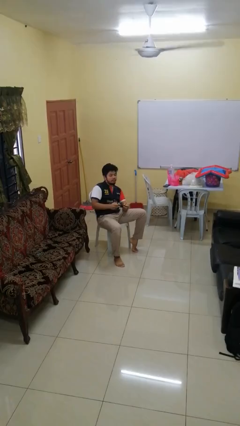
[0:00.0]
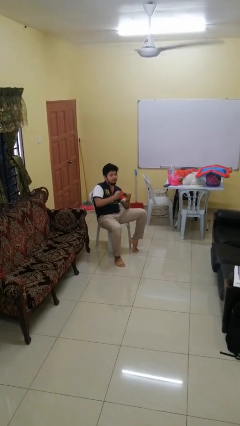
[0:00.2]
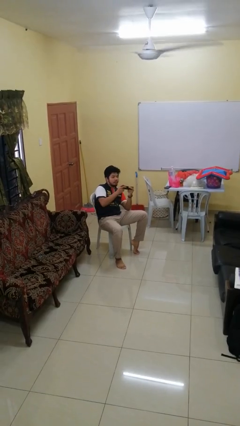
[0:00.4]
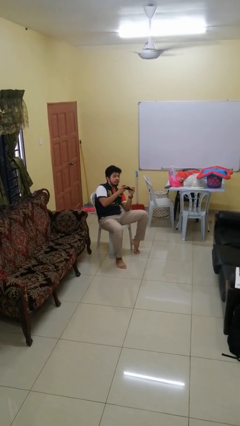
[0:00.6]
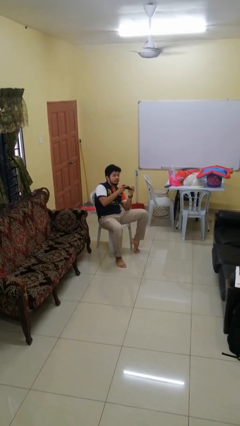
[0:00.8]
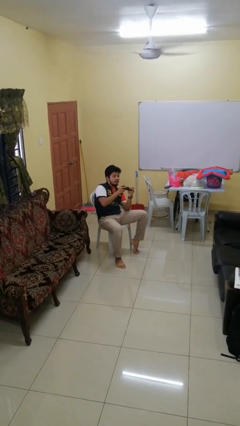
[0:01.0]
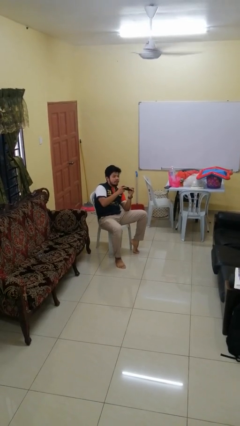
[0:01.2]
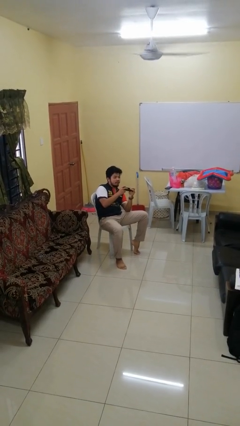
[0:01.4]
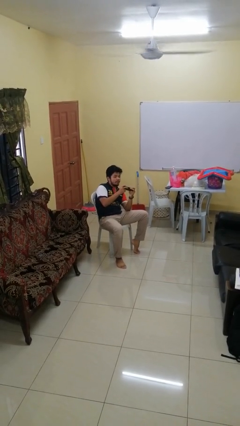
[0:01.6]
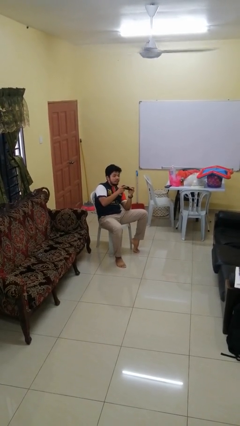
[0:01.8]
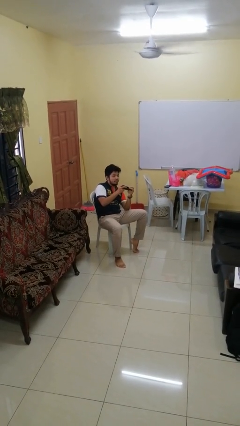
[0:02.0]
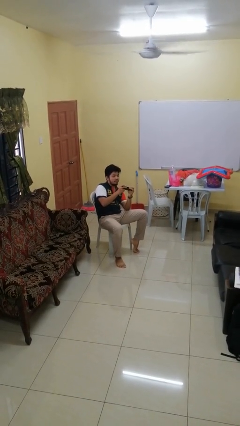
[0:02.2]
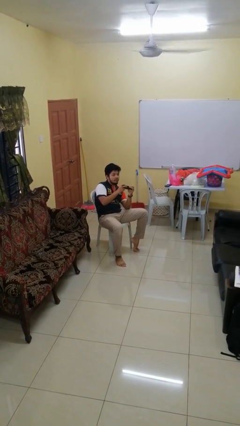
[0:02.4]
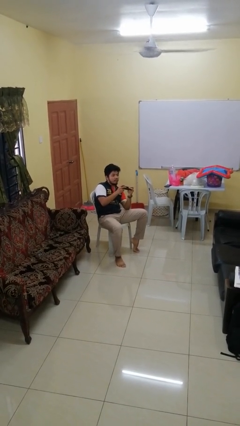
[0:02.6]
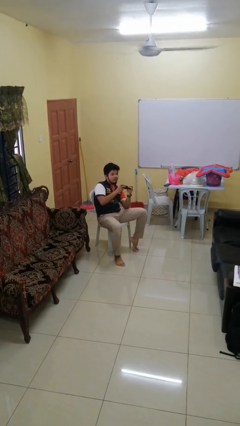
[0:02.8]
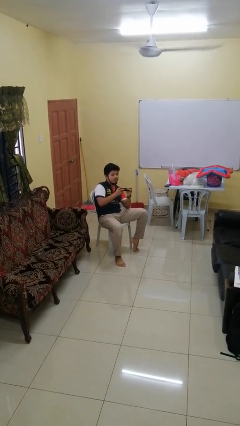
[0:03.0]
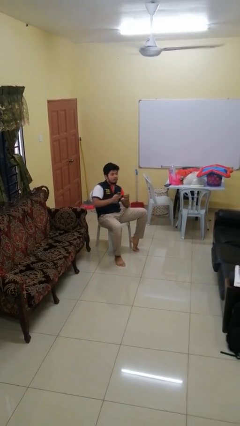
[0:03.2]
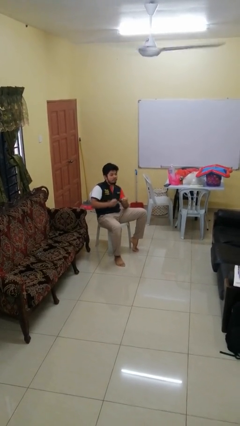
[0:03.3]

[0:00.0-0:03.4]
person interacts with handheld game

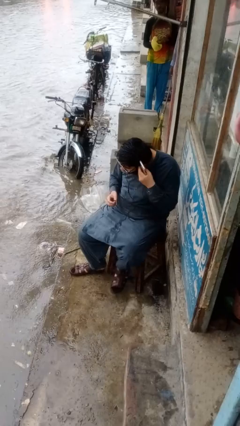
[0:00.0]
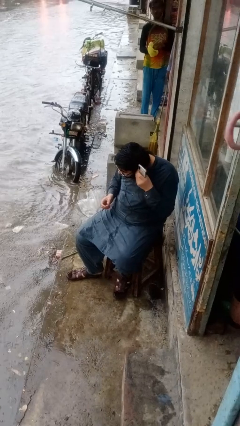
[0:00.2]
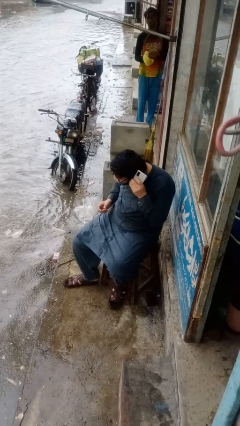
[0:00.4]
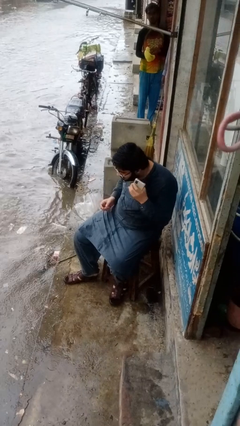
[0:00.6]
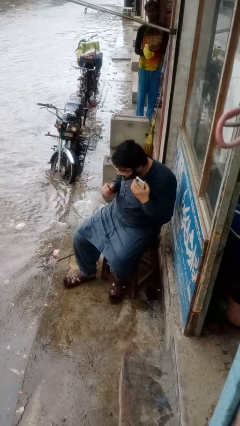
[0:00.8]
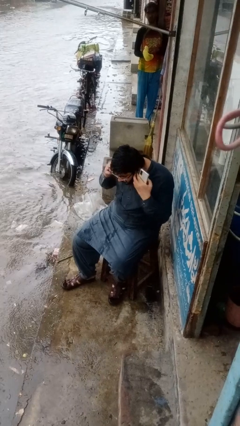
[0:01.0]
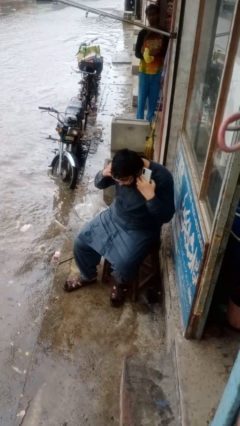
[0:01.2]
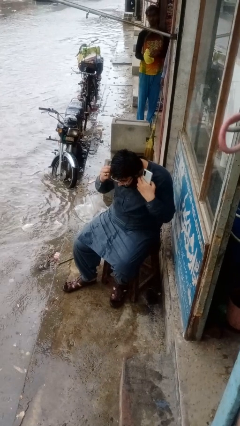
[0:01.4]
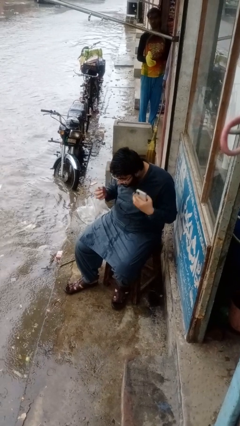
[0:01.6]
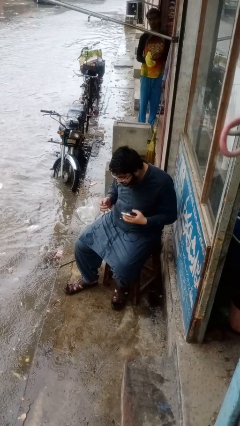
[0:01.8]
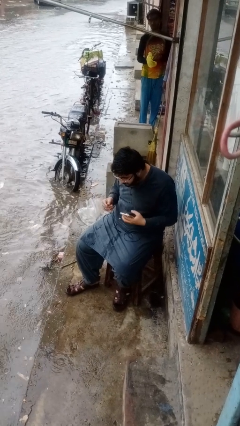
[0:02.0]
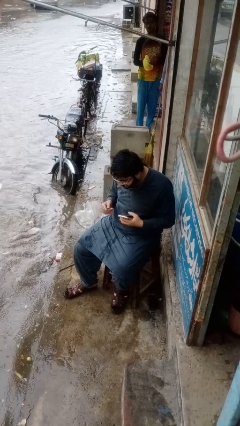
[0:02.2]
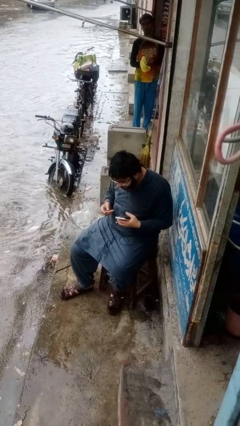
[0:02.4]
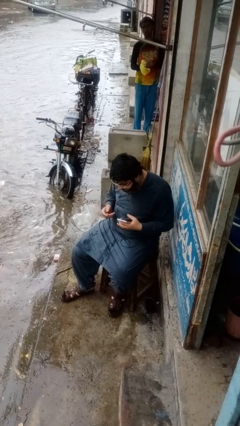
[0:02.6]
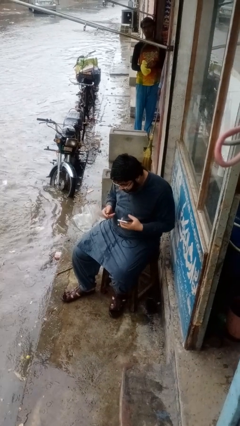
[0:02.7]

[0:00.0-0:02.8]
person takes off headphones

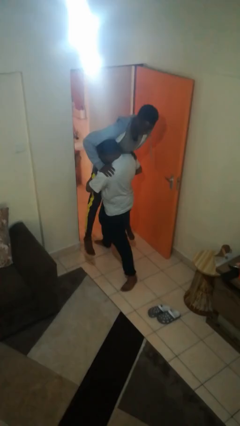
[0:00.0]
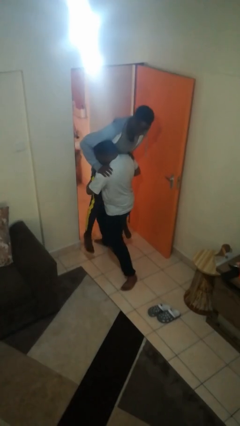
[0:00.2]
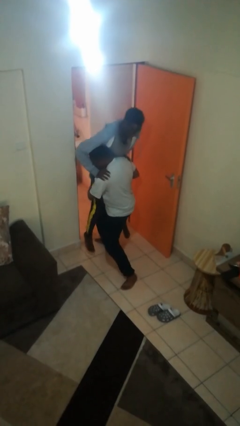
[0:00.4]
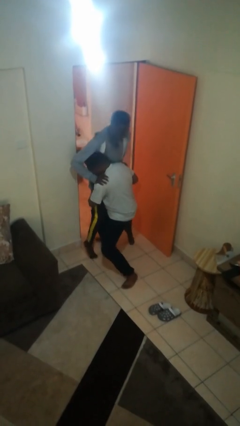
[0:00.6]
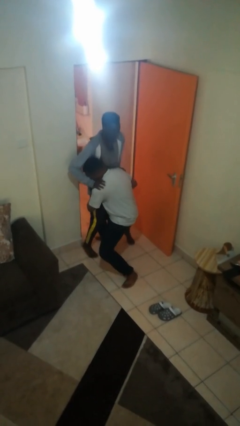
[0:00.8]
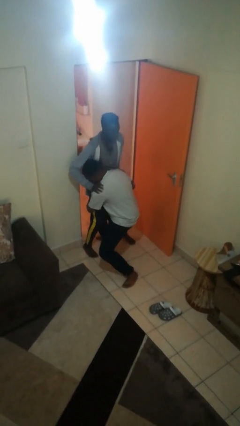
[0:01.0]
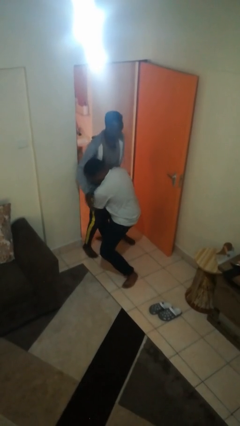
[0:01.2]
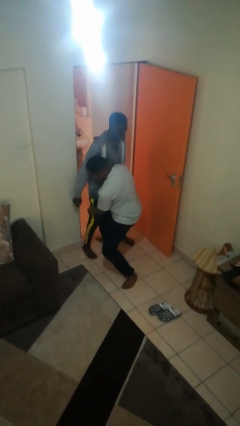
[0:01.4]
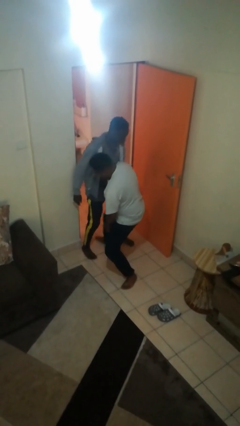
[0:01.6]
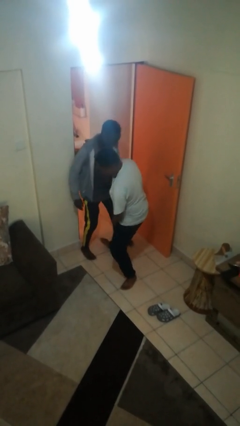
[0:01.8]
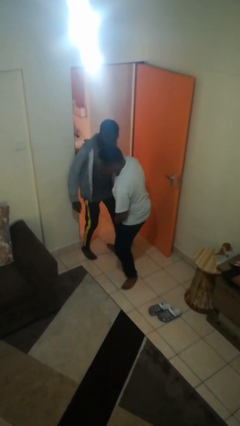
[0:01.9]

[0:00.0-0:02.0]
person puts down person

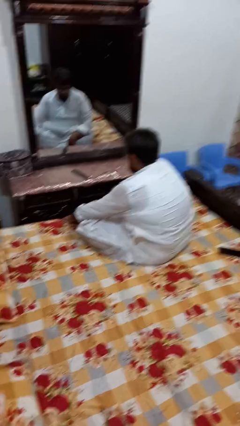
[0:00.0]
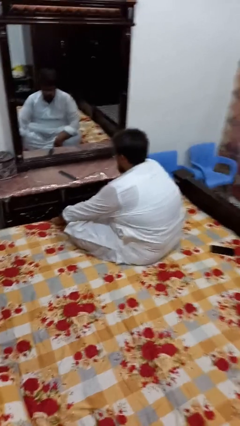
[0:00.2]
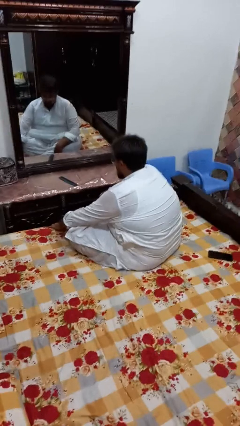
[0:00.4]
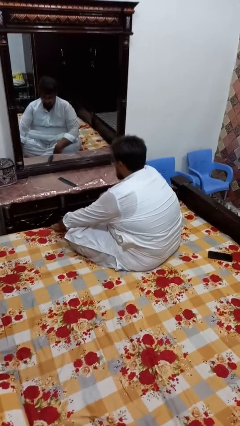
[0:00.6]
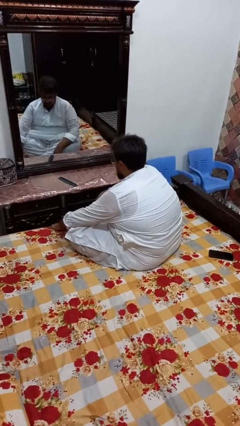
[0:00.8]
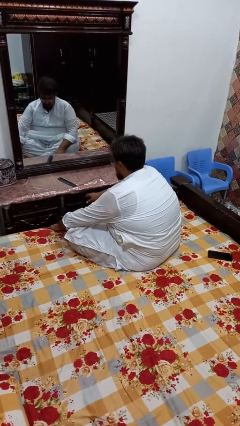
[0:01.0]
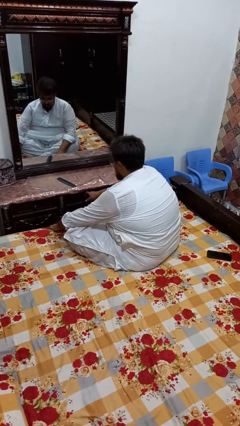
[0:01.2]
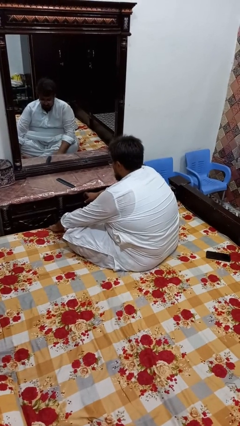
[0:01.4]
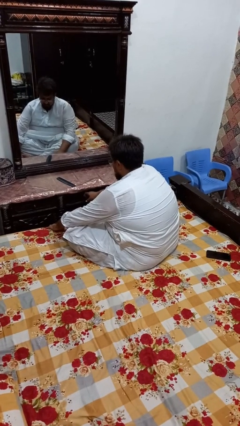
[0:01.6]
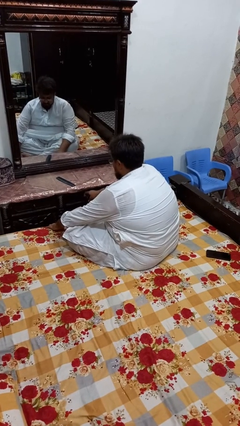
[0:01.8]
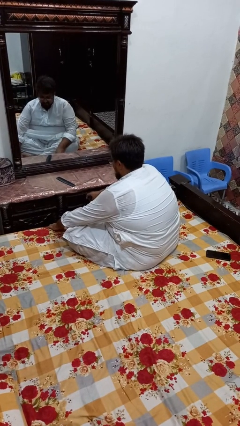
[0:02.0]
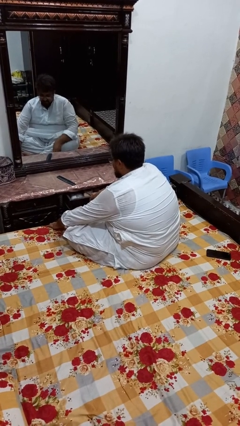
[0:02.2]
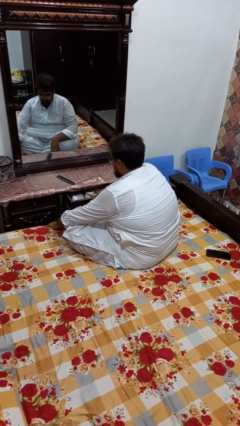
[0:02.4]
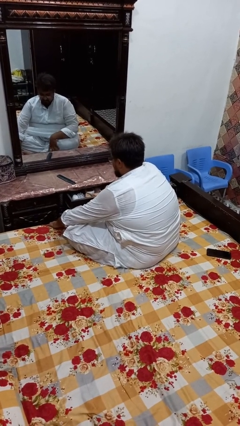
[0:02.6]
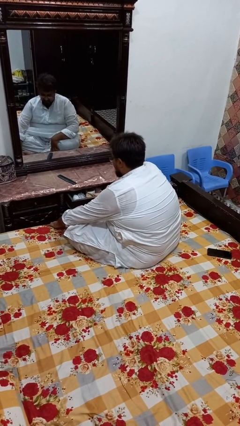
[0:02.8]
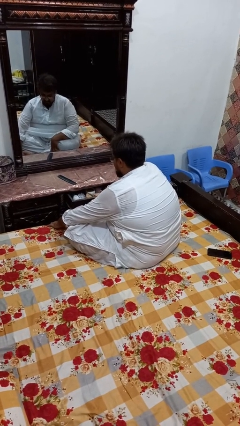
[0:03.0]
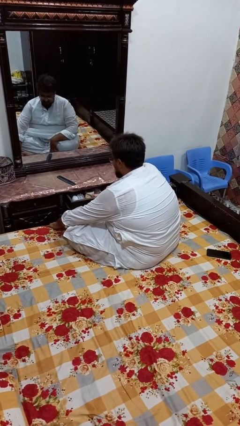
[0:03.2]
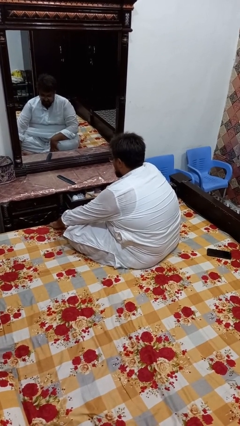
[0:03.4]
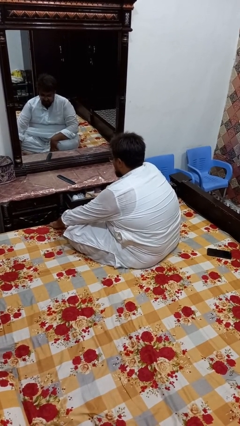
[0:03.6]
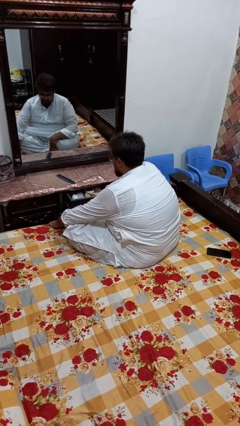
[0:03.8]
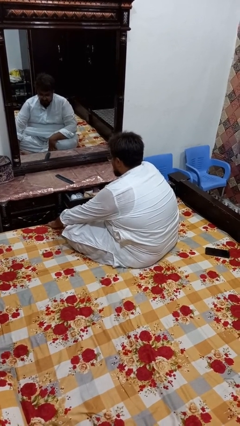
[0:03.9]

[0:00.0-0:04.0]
person opens dresser drawer

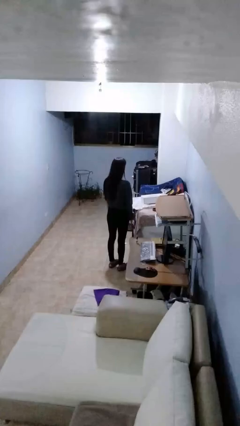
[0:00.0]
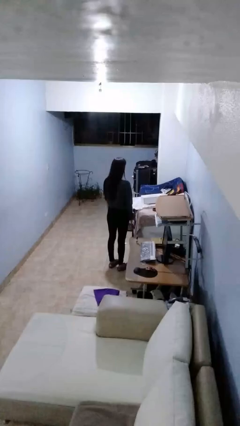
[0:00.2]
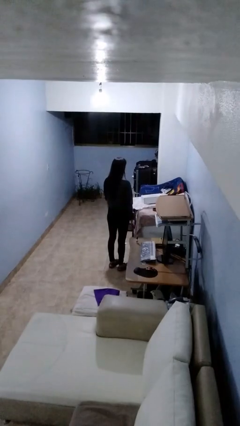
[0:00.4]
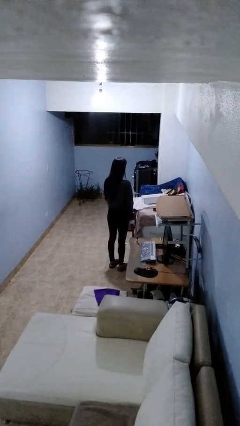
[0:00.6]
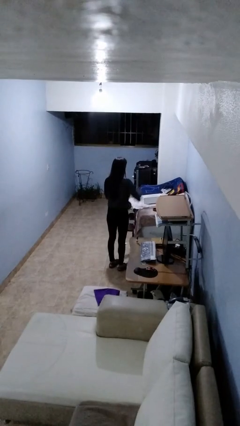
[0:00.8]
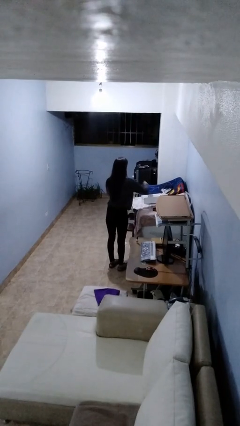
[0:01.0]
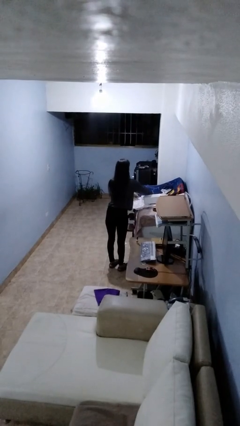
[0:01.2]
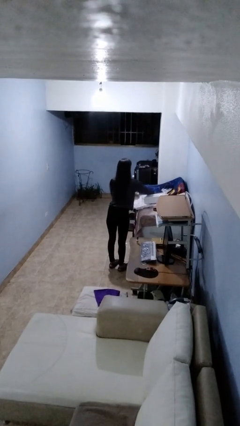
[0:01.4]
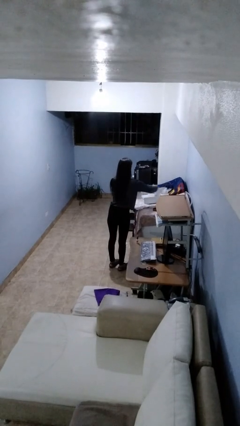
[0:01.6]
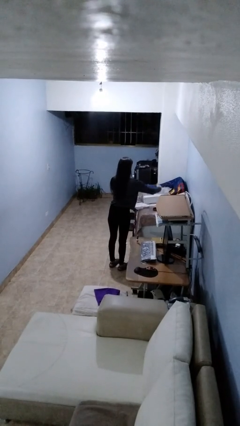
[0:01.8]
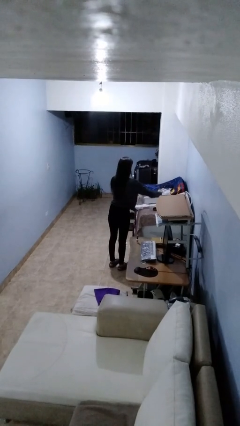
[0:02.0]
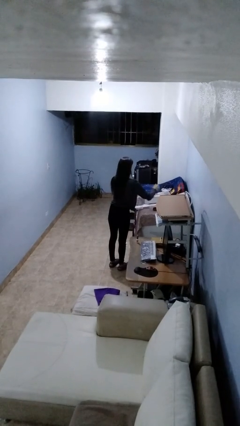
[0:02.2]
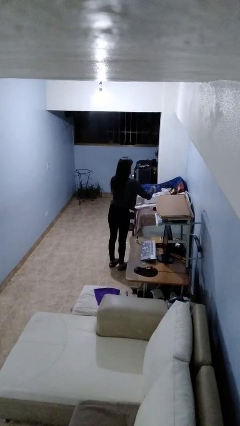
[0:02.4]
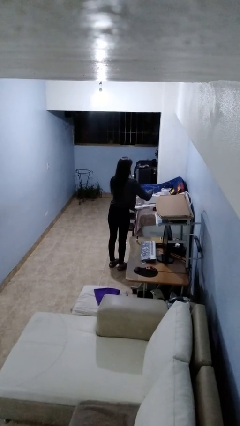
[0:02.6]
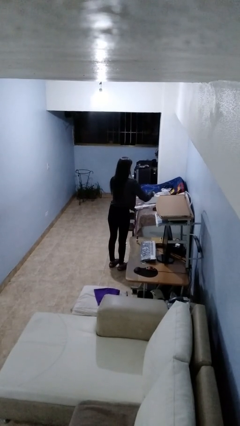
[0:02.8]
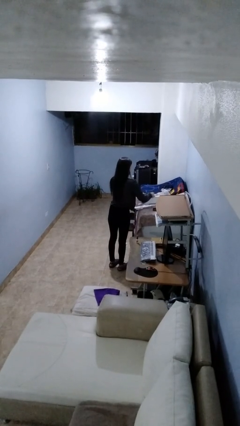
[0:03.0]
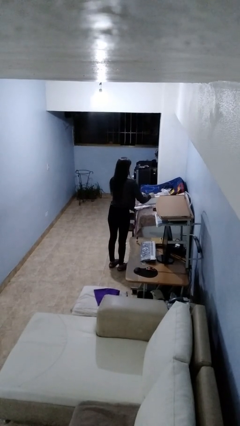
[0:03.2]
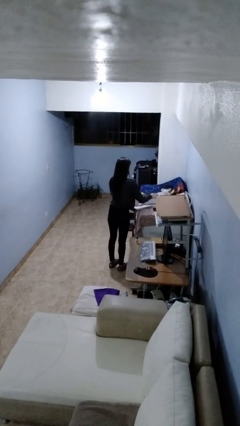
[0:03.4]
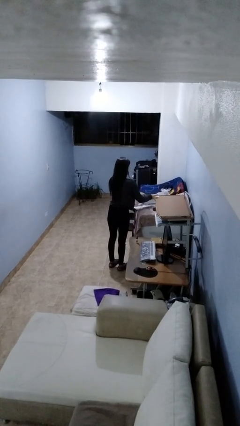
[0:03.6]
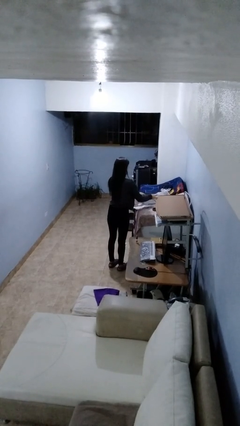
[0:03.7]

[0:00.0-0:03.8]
person wraps box

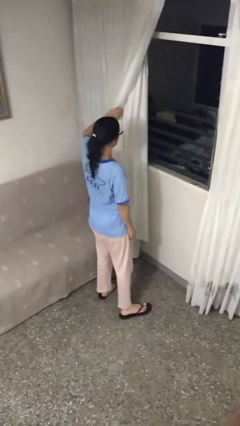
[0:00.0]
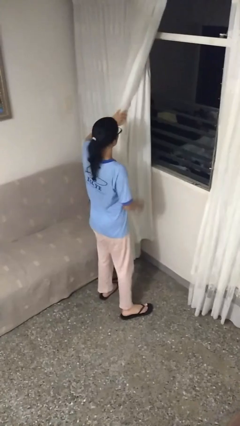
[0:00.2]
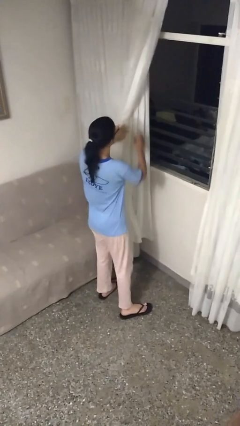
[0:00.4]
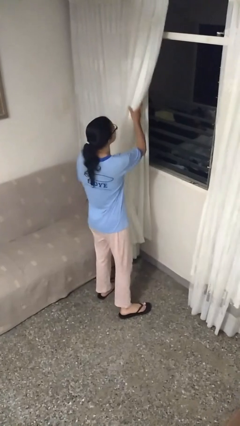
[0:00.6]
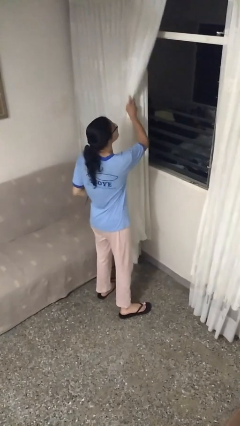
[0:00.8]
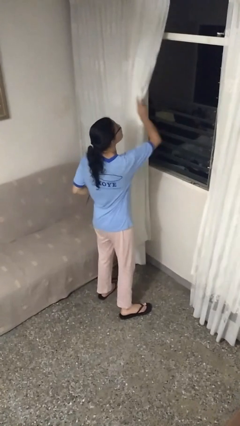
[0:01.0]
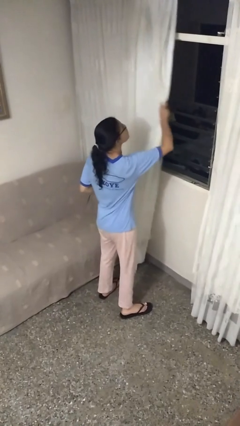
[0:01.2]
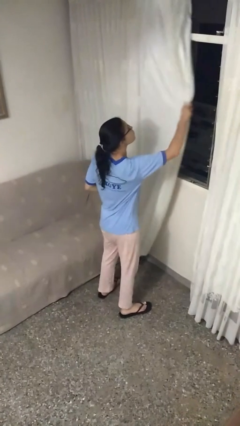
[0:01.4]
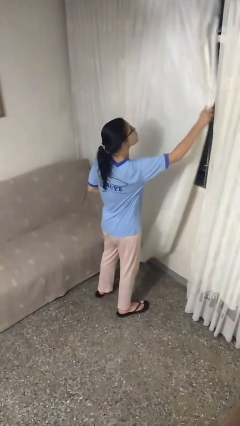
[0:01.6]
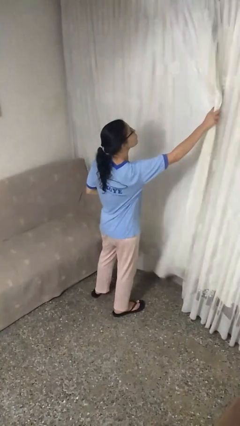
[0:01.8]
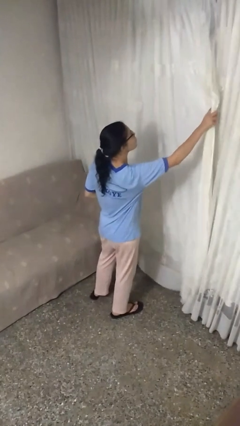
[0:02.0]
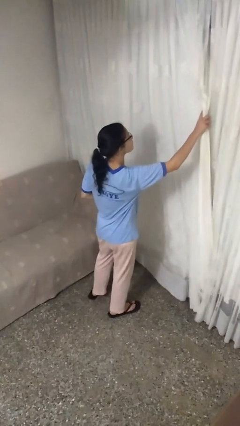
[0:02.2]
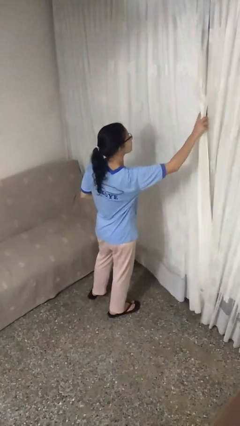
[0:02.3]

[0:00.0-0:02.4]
person closes curtains
